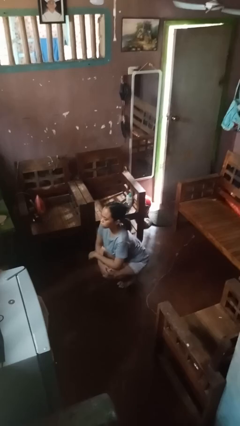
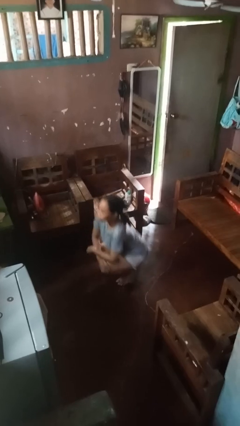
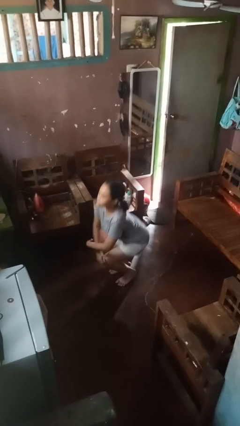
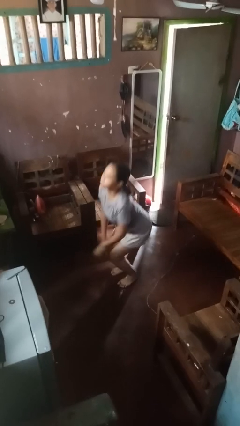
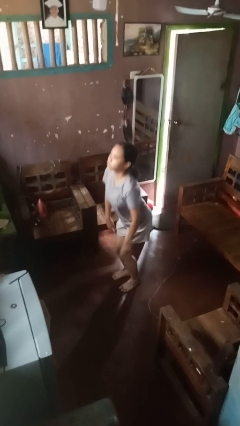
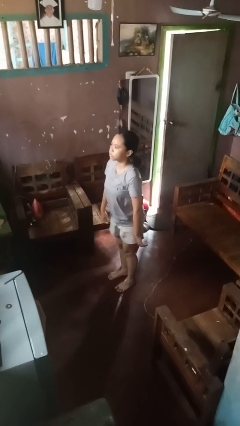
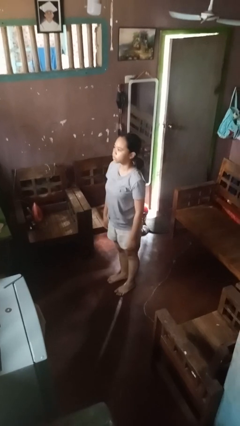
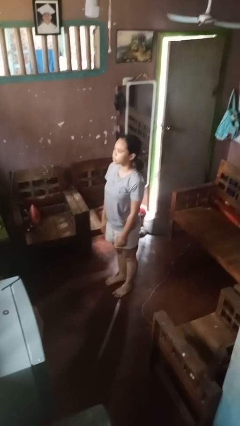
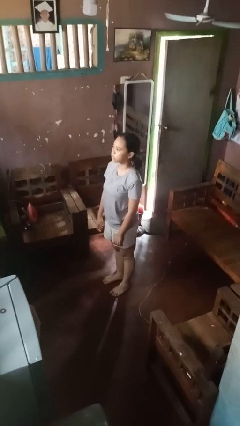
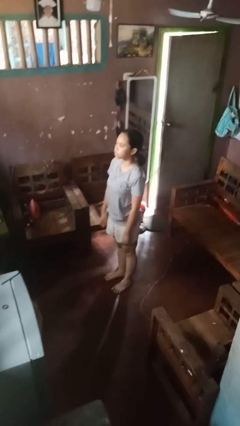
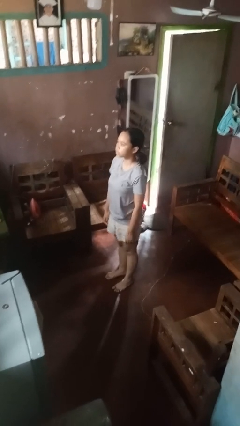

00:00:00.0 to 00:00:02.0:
person stands up

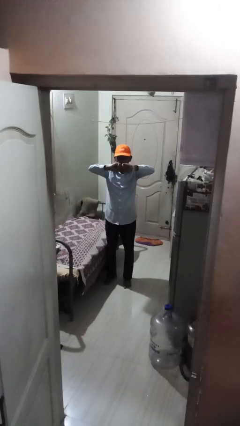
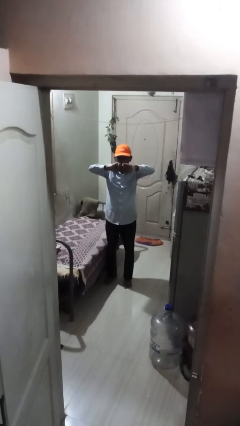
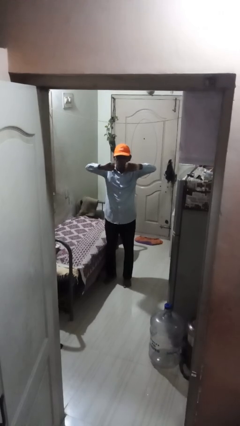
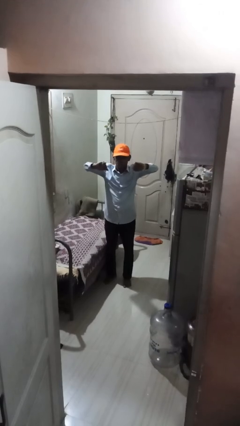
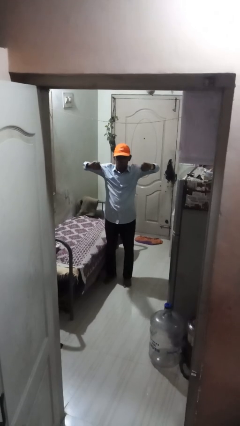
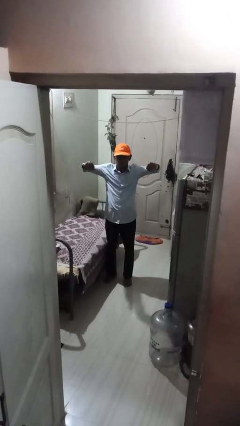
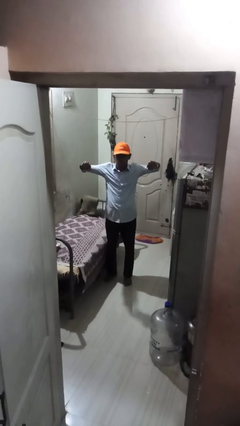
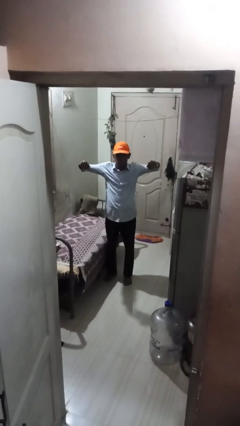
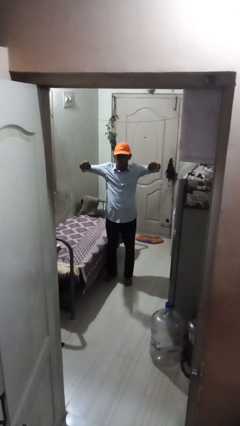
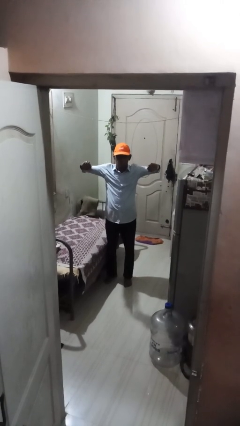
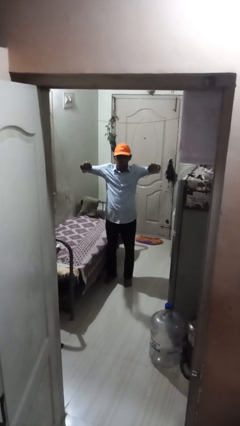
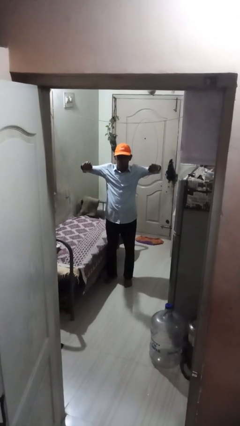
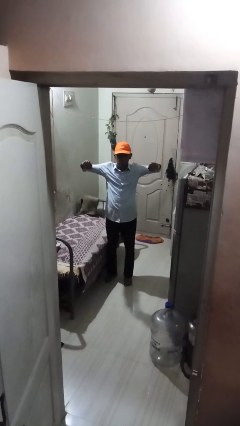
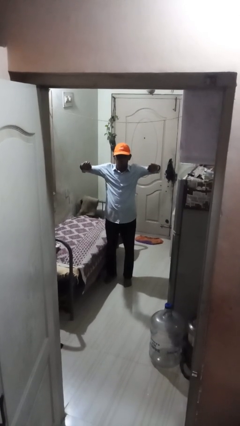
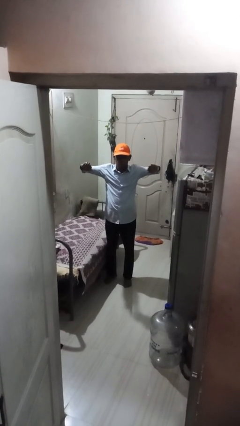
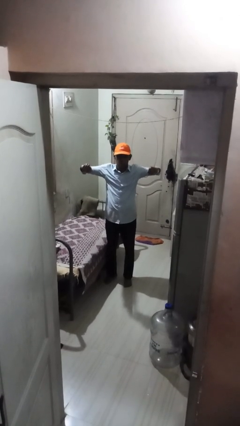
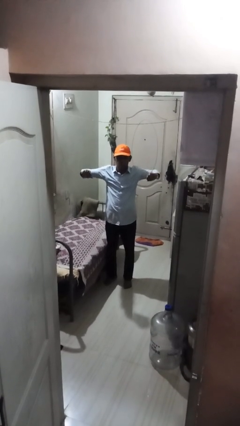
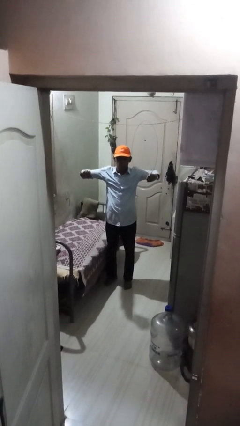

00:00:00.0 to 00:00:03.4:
person gestures zoom out

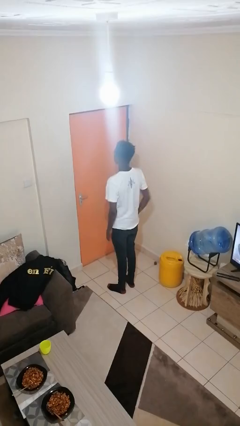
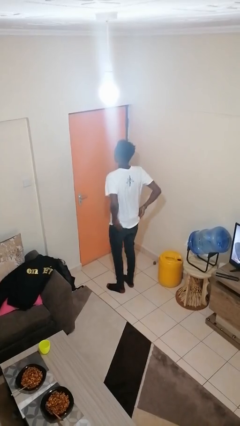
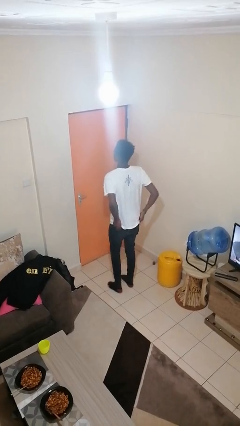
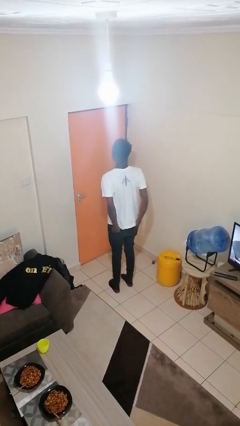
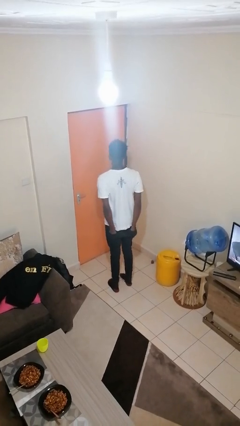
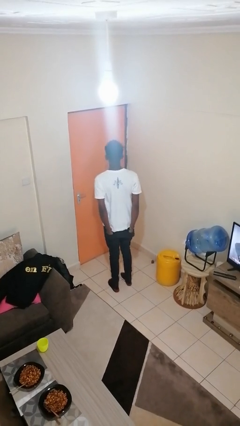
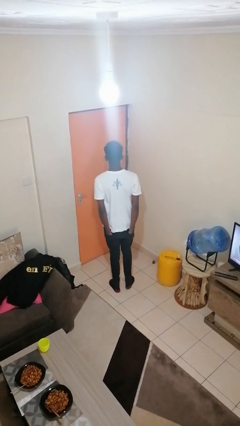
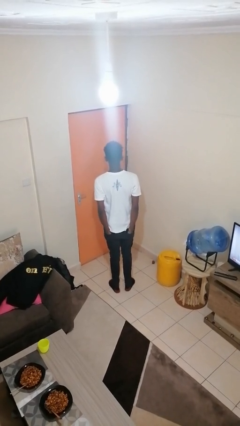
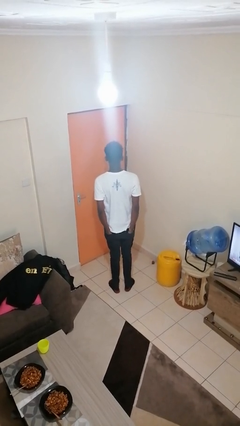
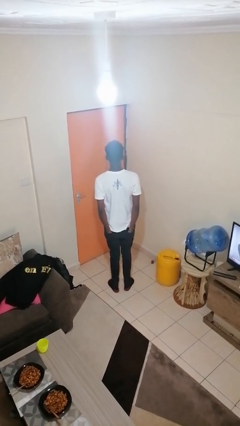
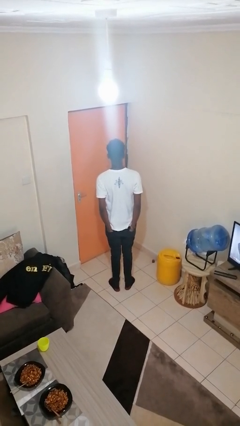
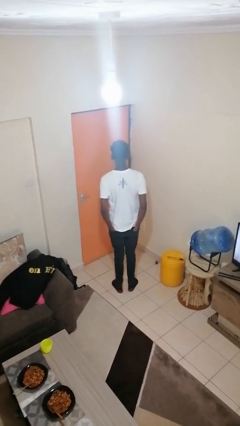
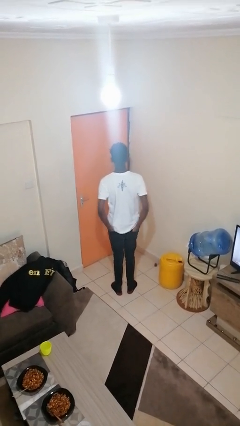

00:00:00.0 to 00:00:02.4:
person puts hands in back pockets

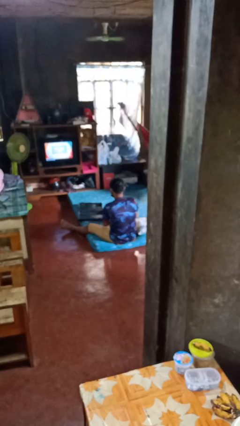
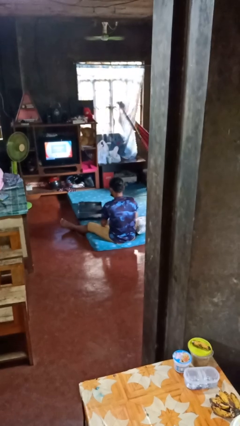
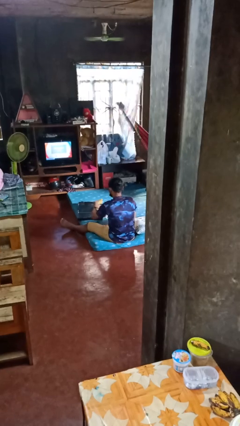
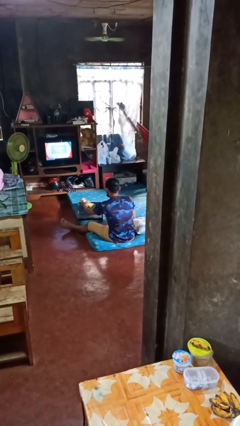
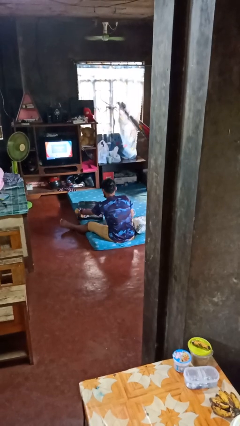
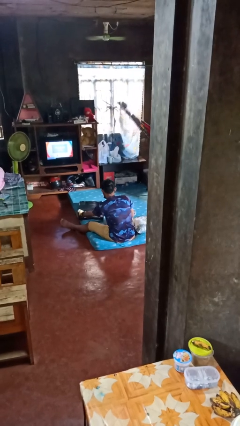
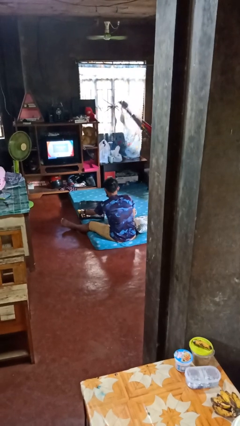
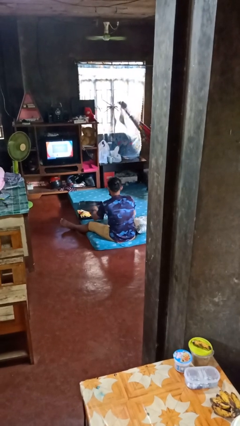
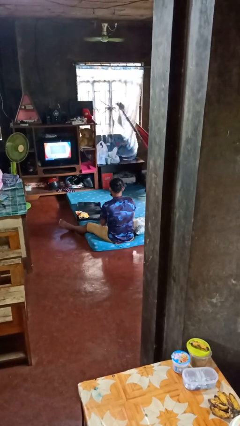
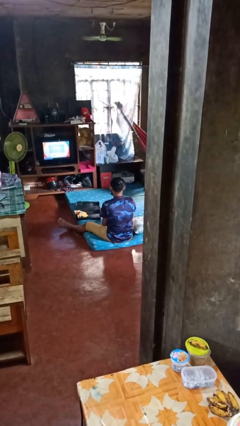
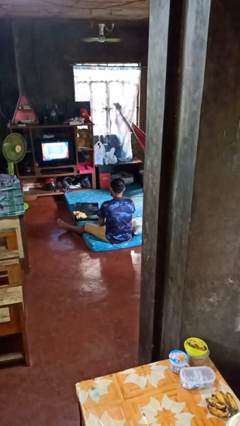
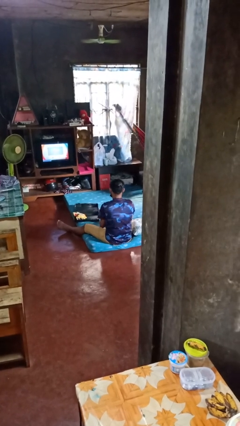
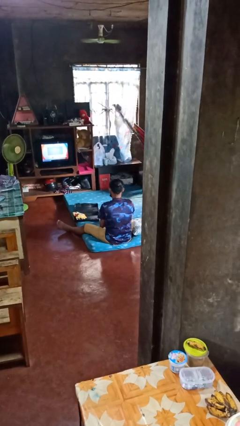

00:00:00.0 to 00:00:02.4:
person loads clothes into suitcase

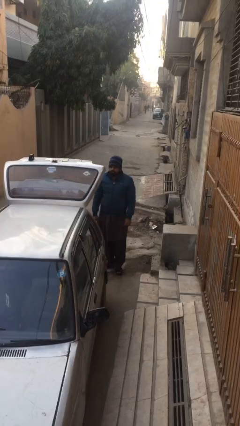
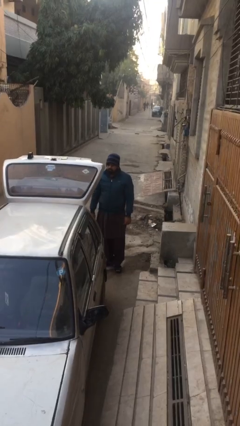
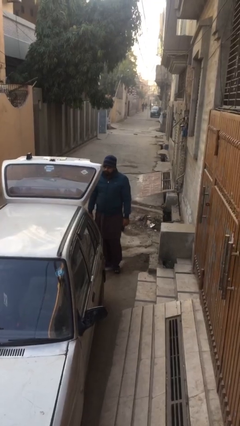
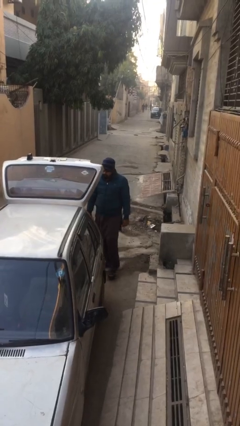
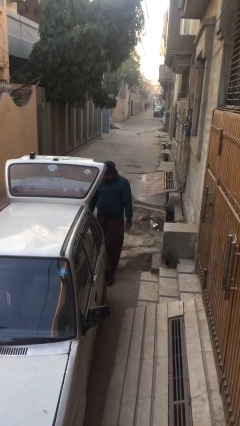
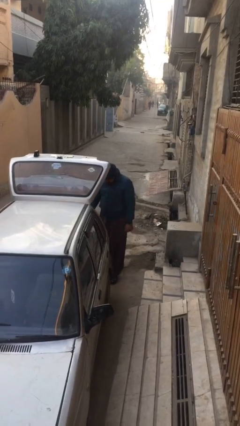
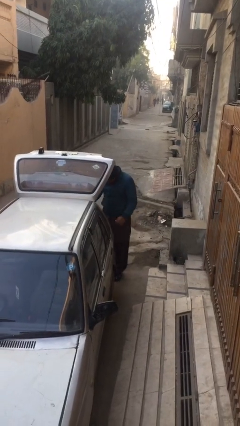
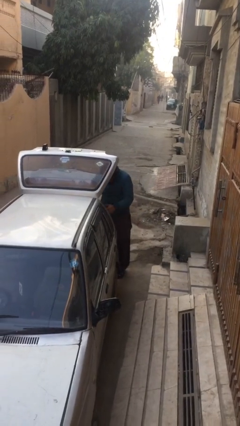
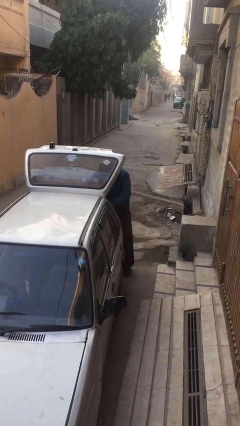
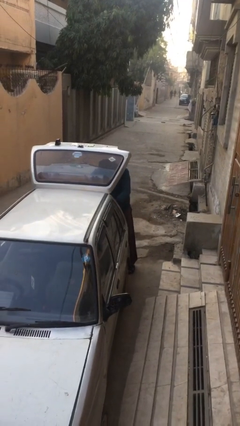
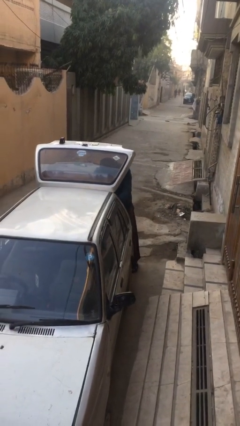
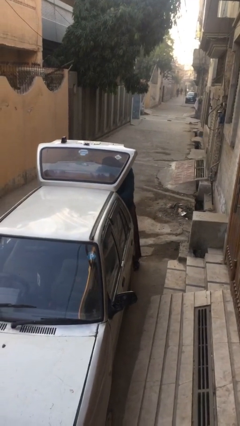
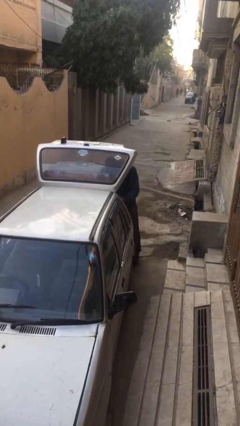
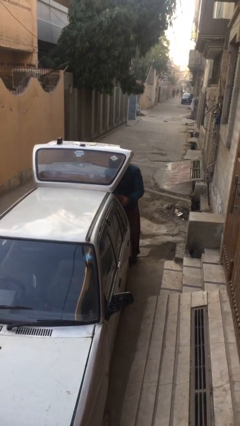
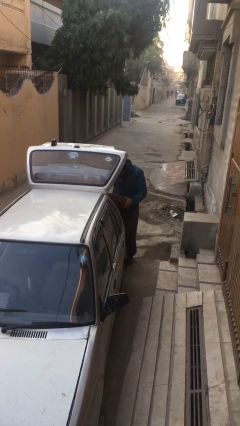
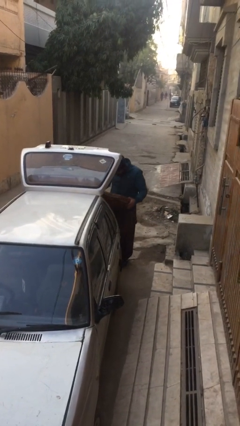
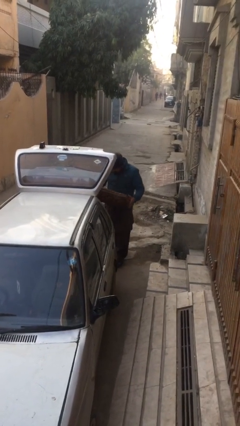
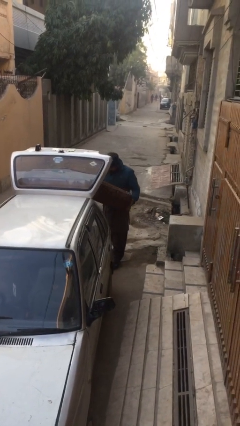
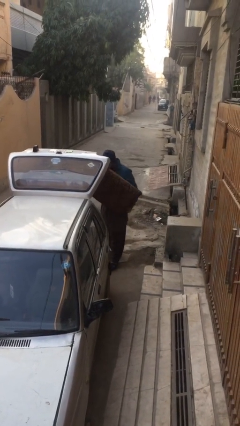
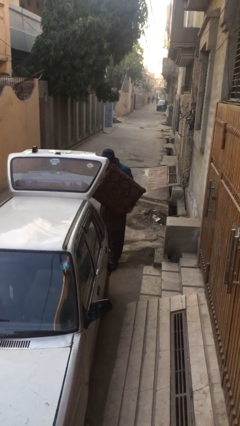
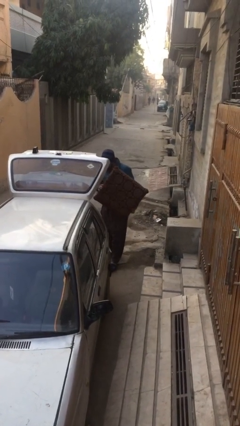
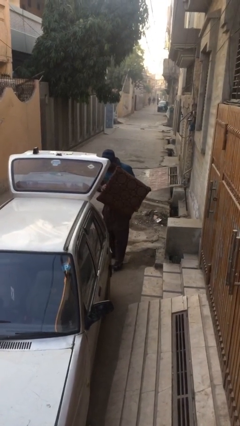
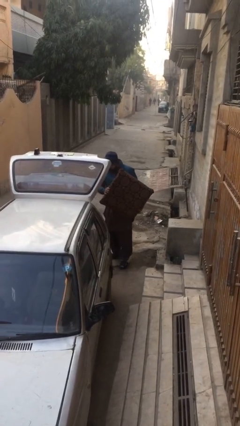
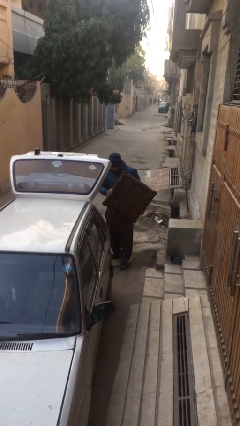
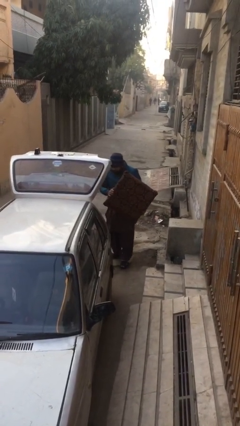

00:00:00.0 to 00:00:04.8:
person unloads car

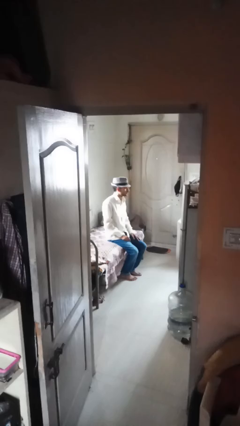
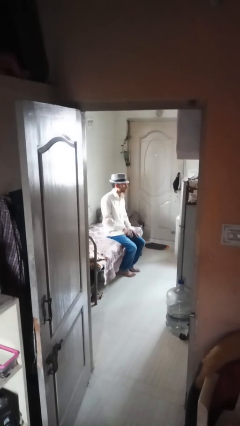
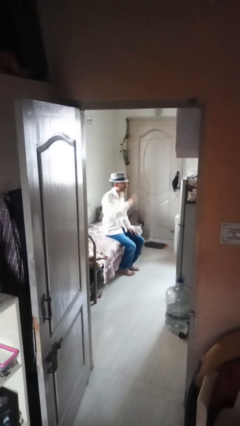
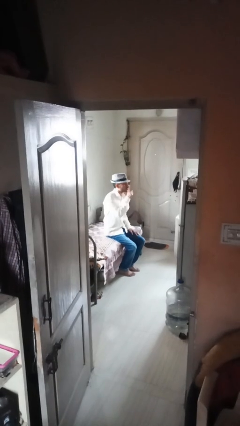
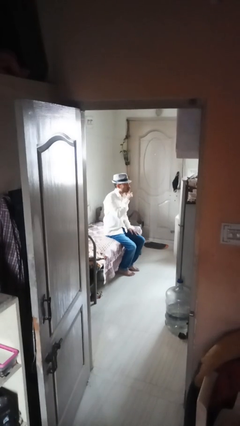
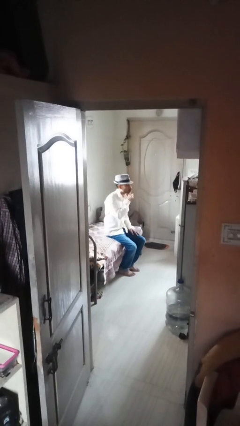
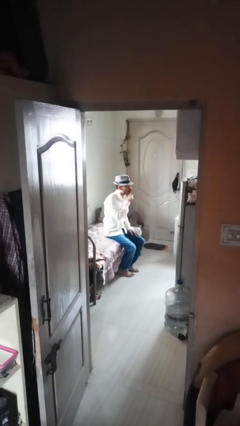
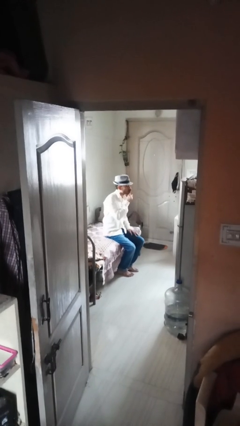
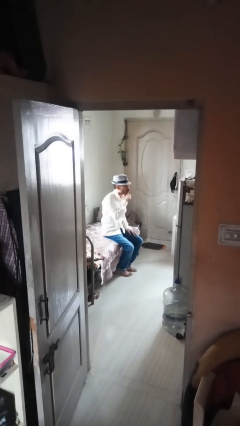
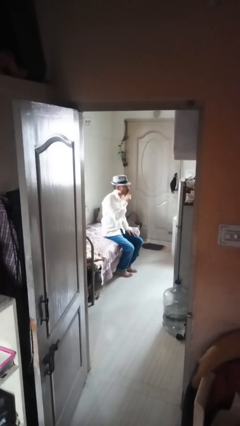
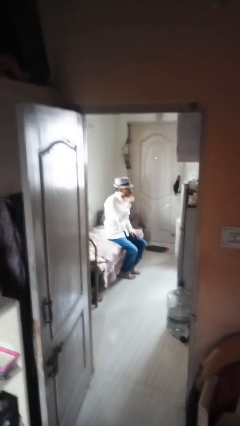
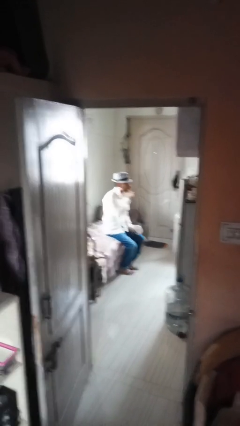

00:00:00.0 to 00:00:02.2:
person gestures be quiet
